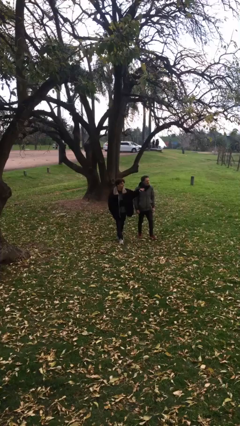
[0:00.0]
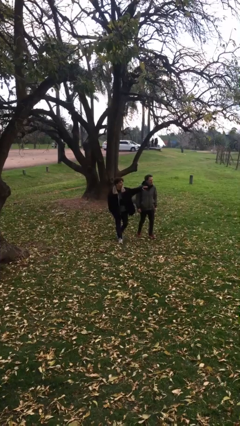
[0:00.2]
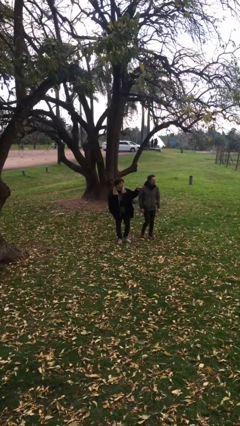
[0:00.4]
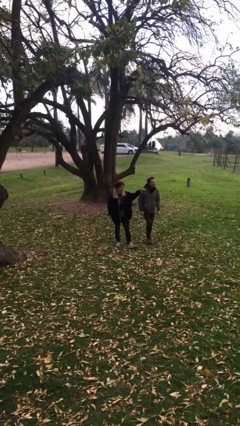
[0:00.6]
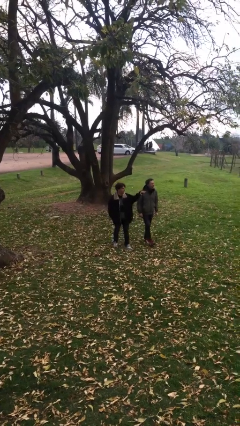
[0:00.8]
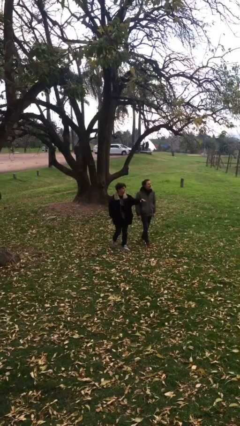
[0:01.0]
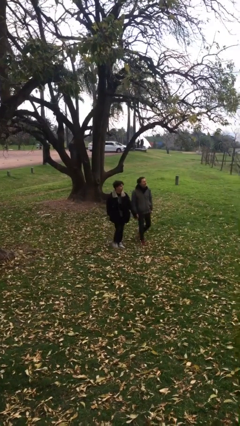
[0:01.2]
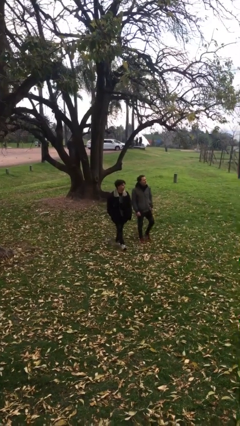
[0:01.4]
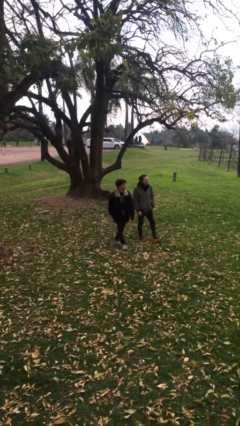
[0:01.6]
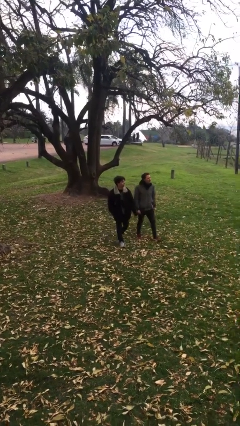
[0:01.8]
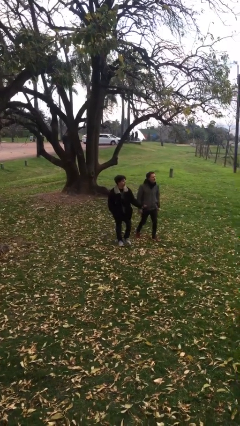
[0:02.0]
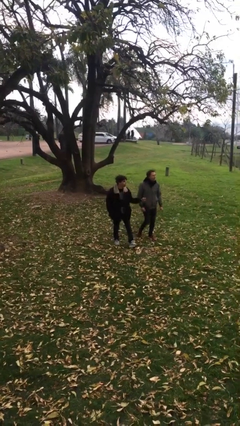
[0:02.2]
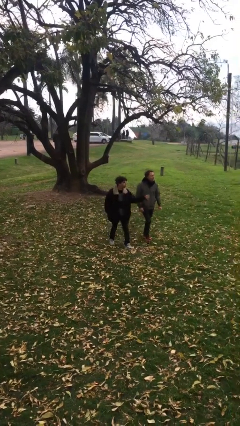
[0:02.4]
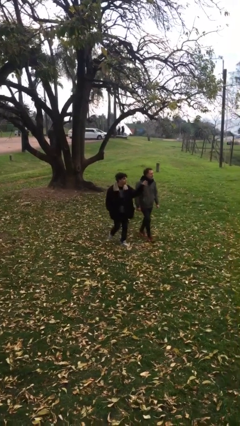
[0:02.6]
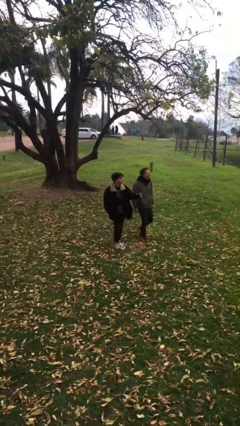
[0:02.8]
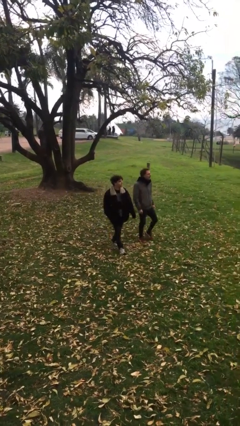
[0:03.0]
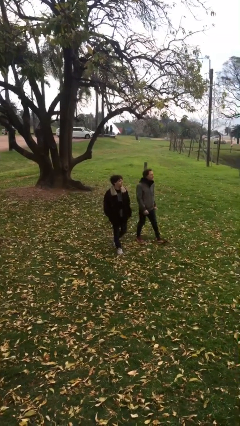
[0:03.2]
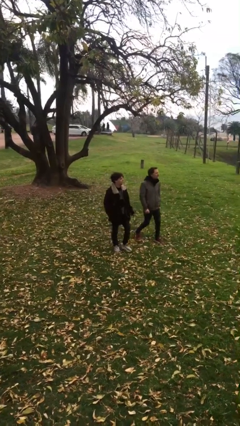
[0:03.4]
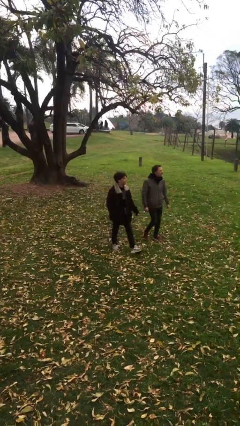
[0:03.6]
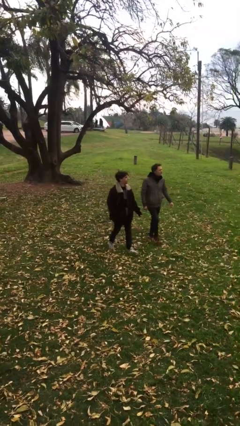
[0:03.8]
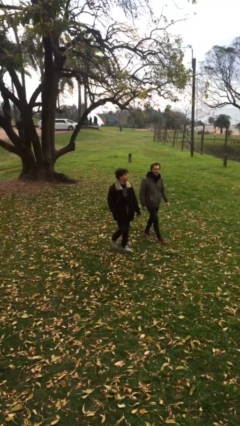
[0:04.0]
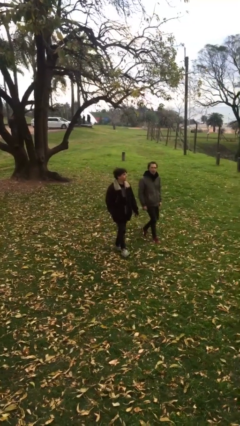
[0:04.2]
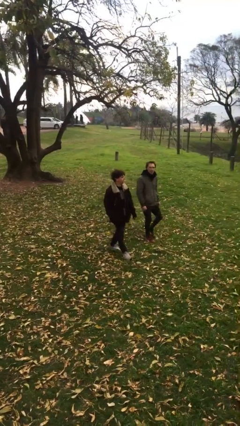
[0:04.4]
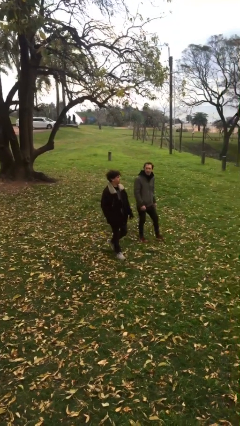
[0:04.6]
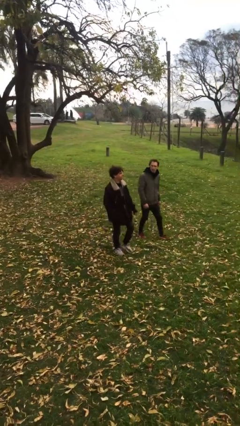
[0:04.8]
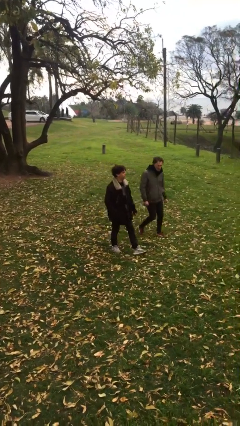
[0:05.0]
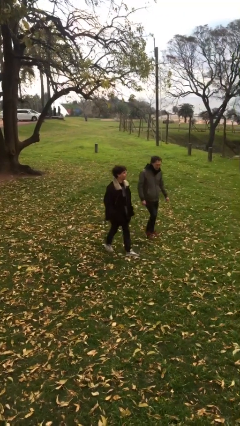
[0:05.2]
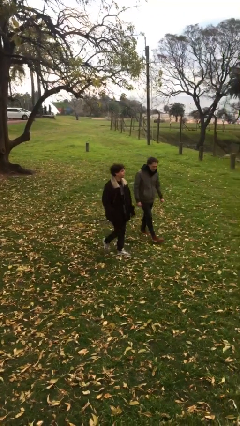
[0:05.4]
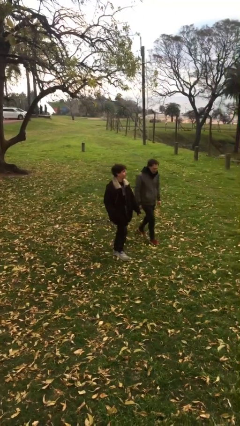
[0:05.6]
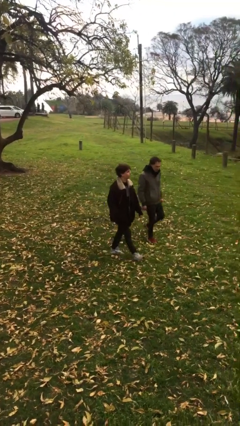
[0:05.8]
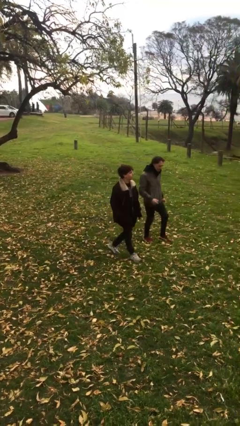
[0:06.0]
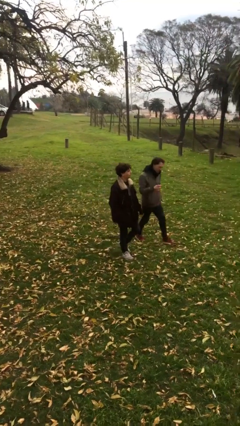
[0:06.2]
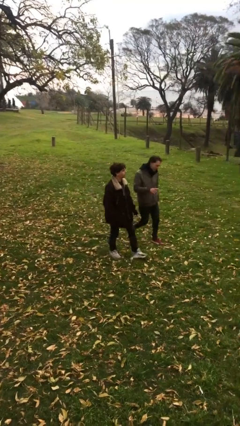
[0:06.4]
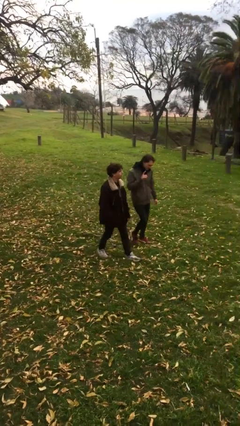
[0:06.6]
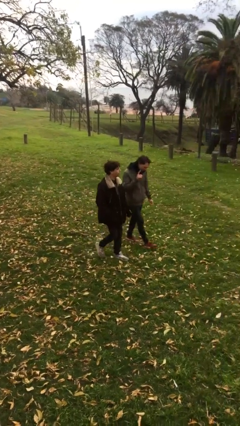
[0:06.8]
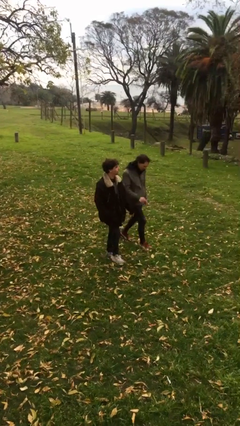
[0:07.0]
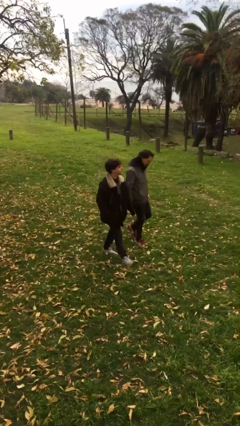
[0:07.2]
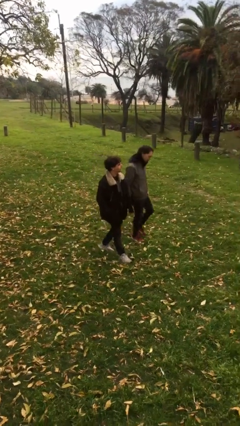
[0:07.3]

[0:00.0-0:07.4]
person talks to person

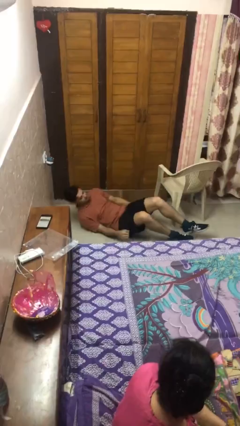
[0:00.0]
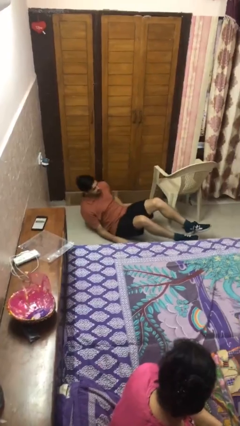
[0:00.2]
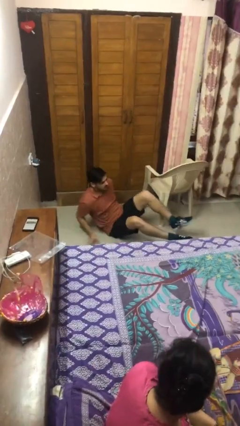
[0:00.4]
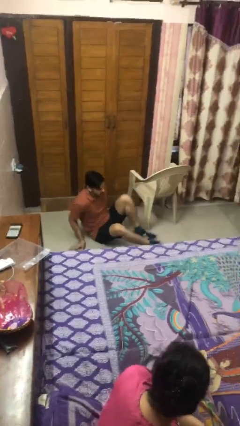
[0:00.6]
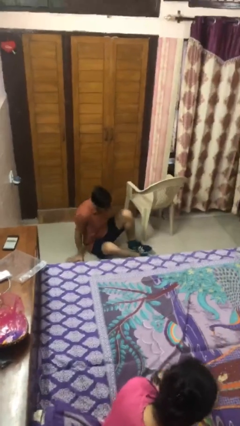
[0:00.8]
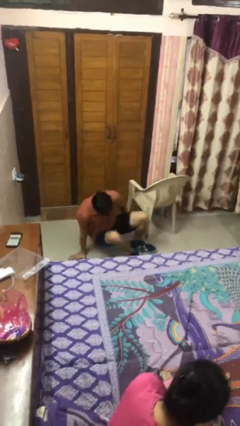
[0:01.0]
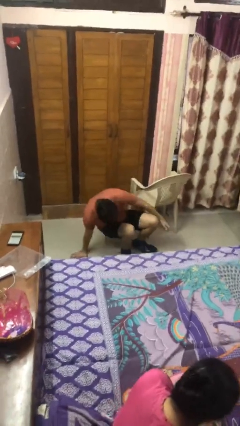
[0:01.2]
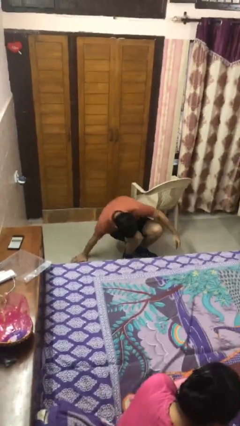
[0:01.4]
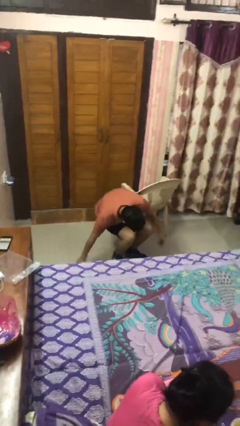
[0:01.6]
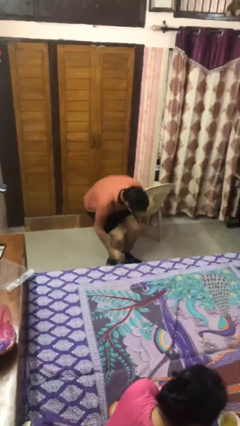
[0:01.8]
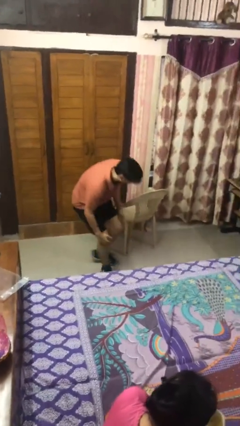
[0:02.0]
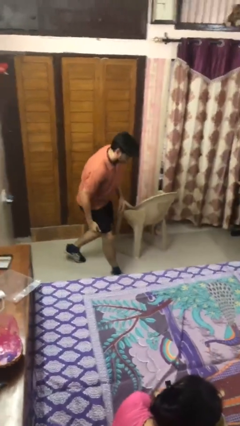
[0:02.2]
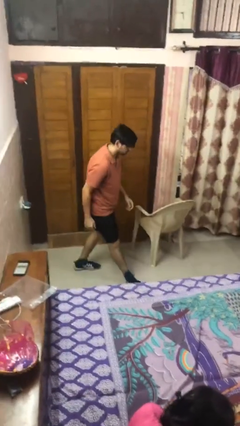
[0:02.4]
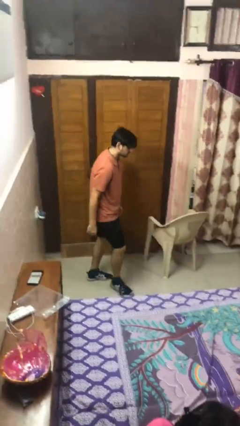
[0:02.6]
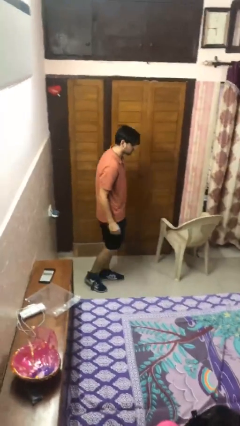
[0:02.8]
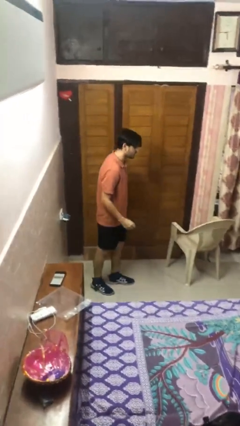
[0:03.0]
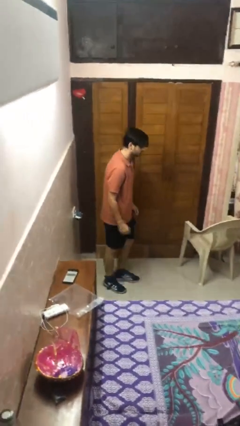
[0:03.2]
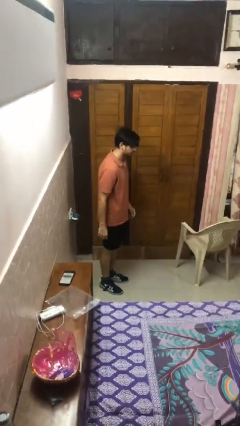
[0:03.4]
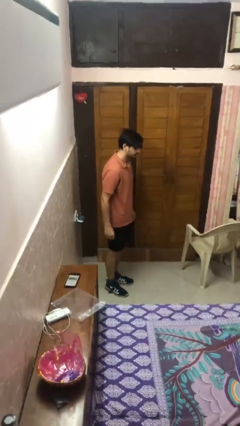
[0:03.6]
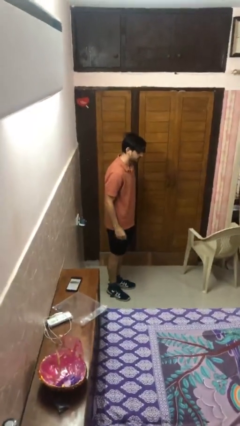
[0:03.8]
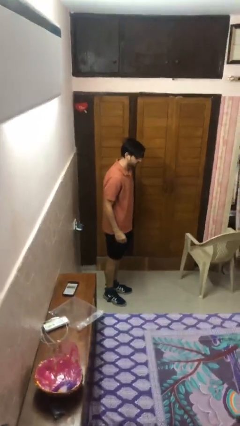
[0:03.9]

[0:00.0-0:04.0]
person stands up from floor

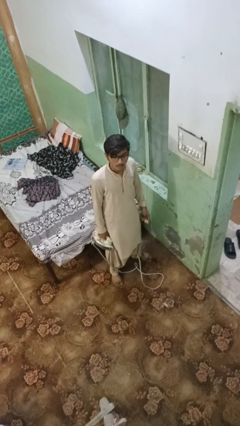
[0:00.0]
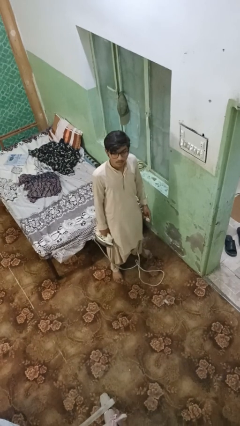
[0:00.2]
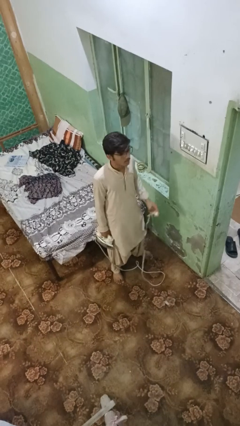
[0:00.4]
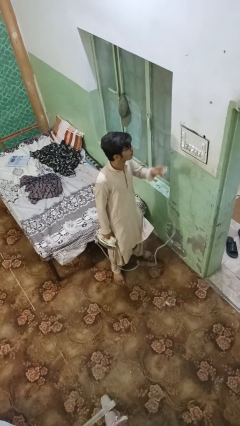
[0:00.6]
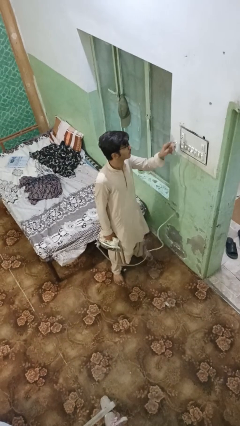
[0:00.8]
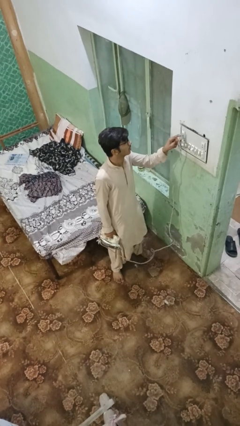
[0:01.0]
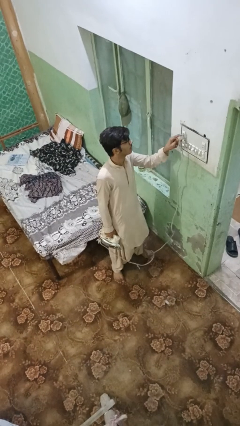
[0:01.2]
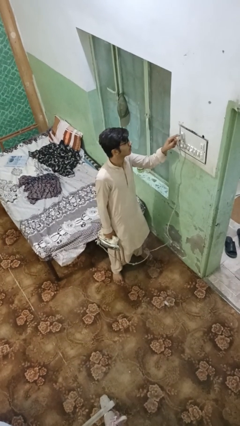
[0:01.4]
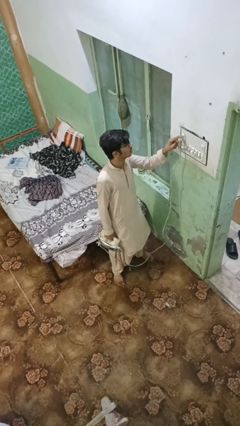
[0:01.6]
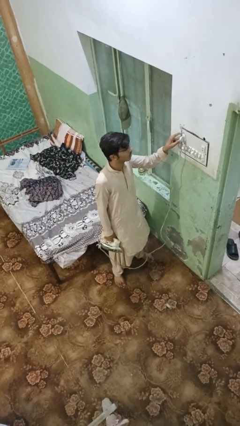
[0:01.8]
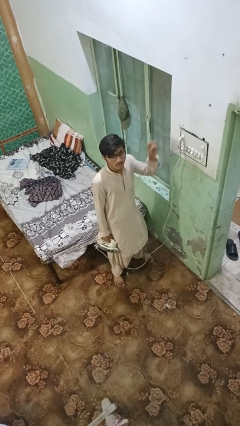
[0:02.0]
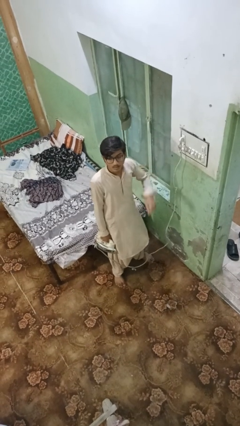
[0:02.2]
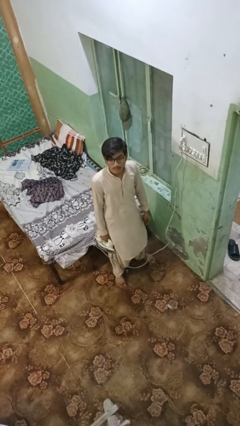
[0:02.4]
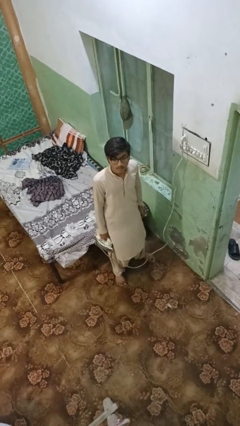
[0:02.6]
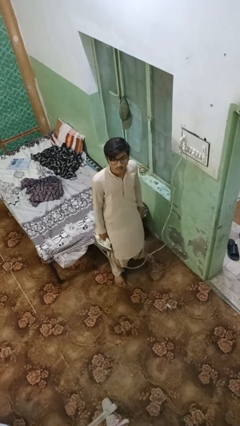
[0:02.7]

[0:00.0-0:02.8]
person plugs into electrical socket

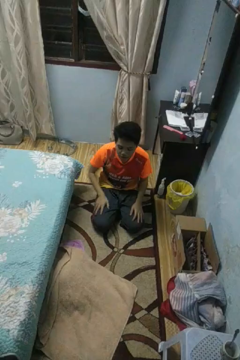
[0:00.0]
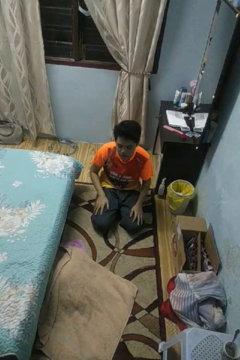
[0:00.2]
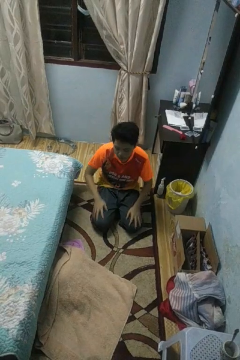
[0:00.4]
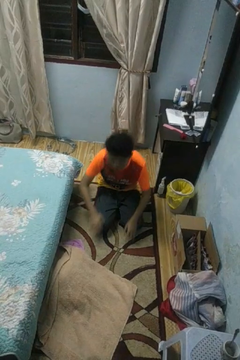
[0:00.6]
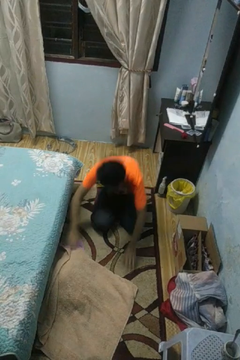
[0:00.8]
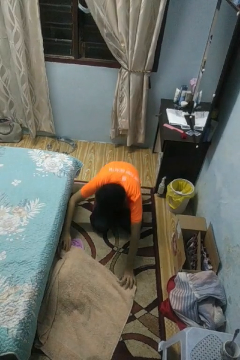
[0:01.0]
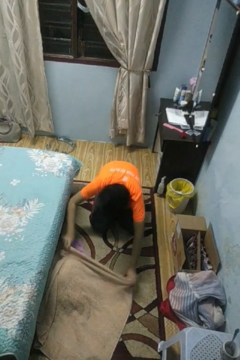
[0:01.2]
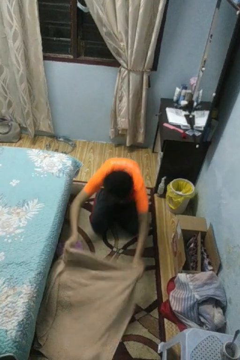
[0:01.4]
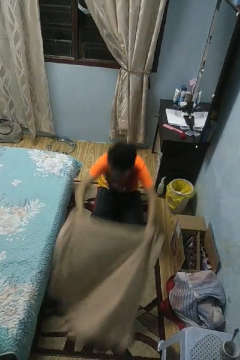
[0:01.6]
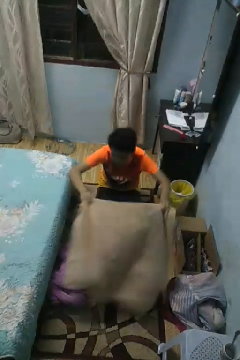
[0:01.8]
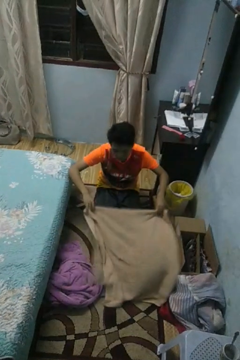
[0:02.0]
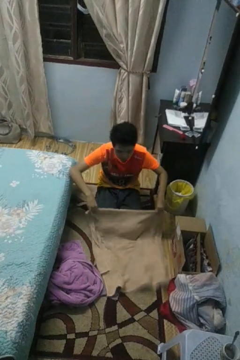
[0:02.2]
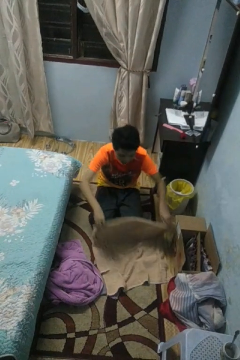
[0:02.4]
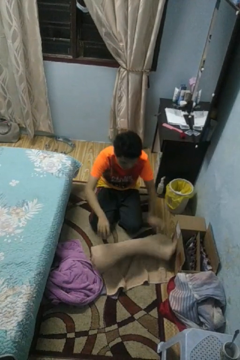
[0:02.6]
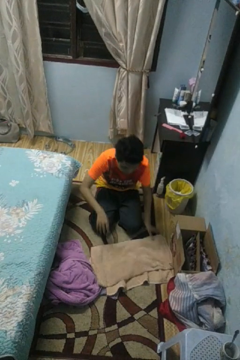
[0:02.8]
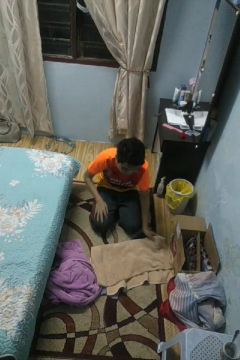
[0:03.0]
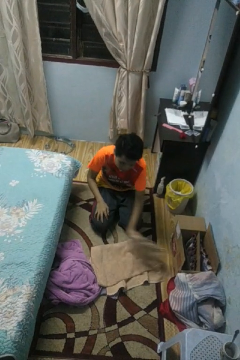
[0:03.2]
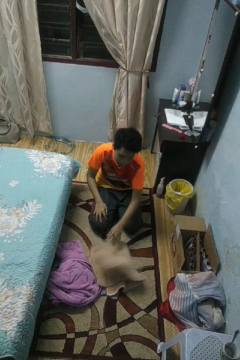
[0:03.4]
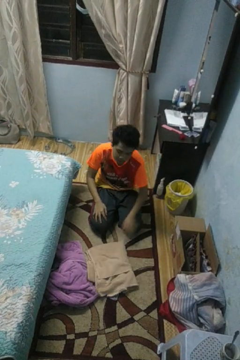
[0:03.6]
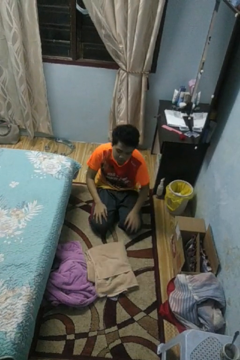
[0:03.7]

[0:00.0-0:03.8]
person folds towel

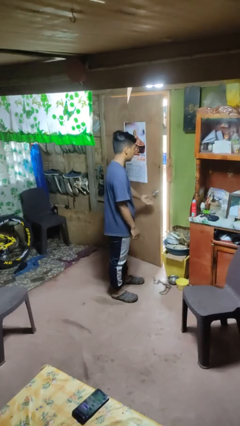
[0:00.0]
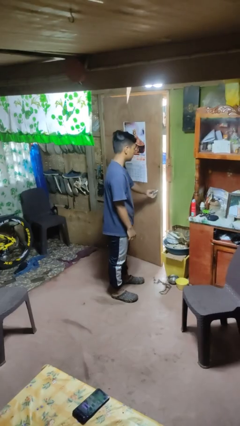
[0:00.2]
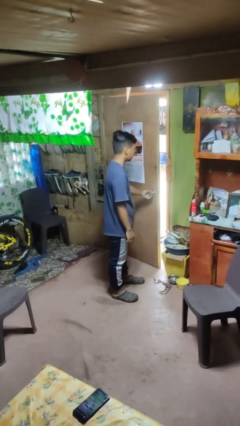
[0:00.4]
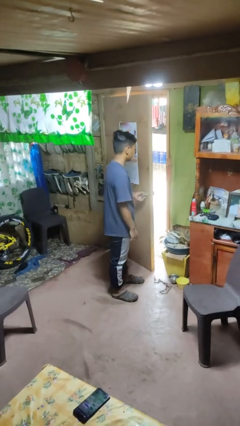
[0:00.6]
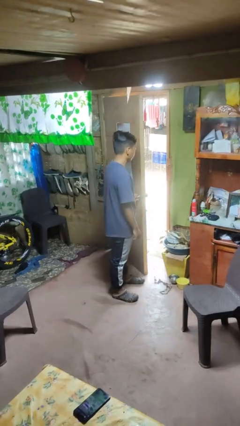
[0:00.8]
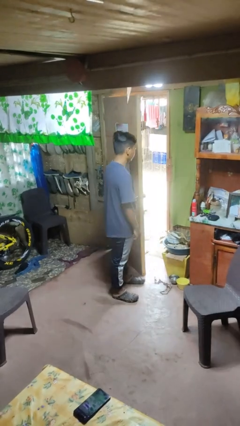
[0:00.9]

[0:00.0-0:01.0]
person opens facility door
